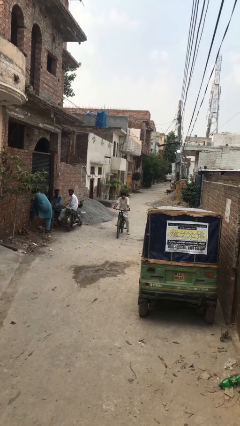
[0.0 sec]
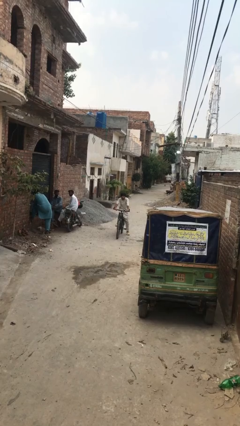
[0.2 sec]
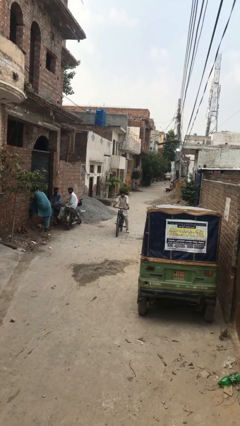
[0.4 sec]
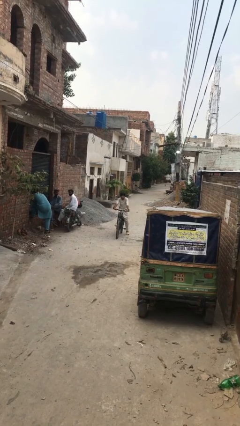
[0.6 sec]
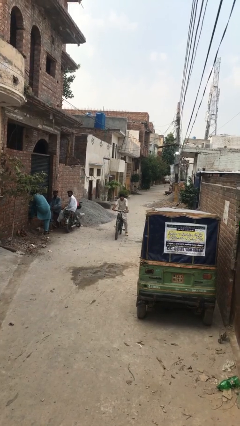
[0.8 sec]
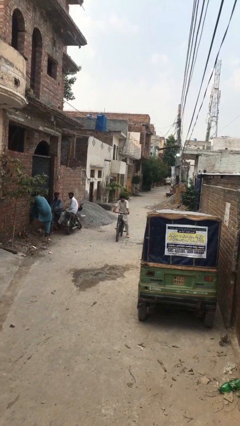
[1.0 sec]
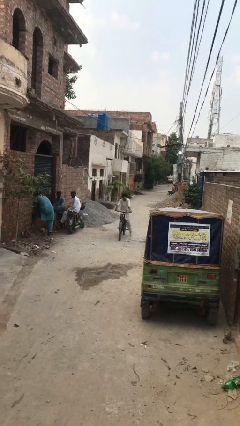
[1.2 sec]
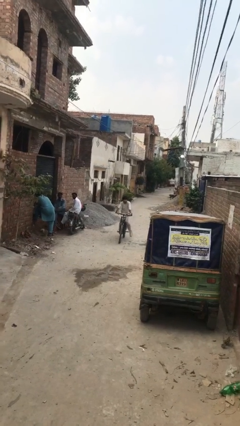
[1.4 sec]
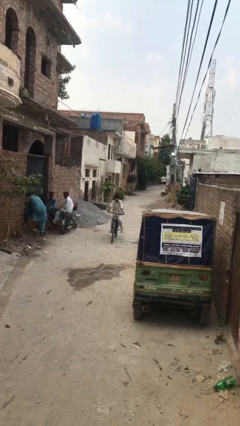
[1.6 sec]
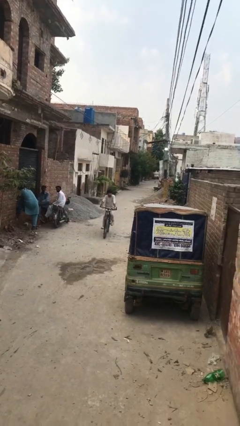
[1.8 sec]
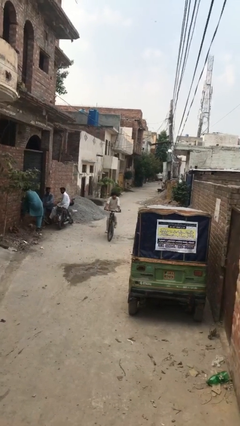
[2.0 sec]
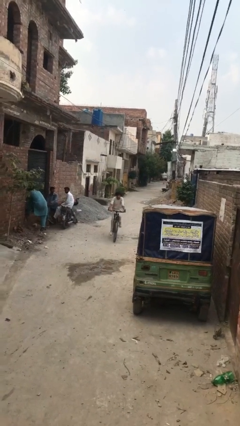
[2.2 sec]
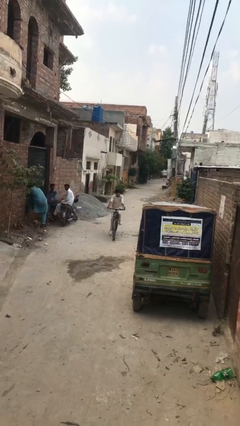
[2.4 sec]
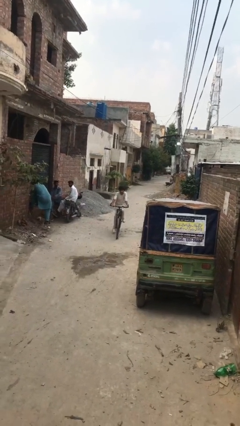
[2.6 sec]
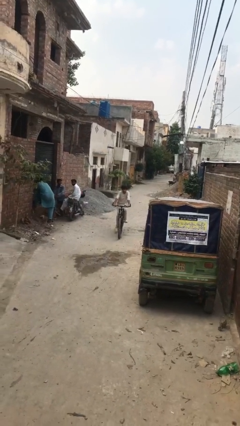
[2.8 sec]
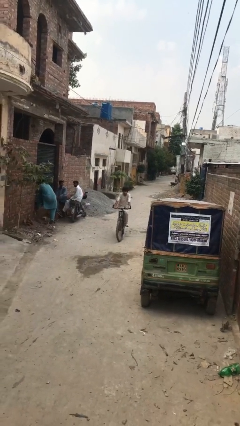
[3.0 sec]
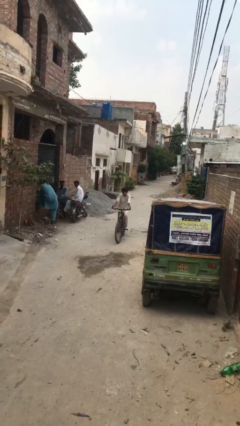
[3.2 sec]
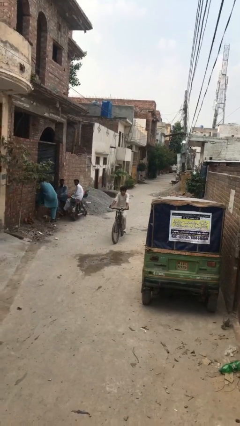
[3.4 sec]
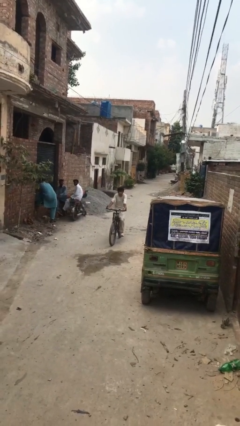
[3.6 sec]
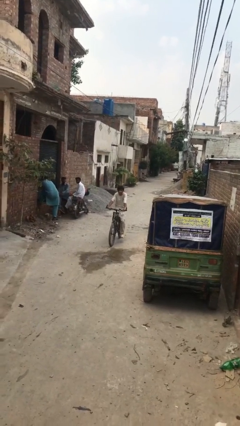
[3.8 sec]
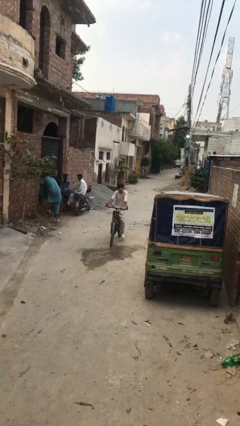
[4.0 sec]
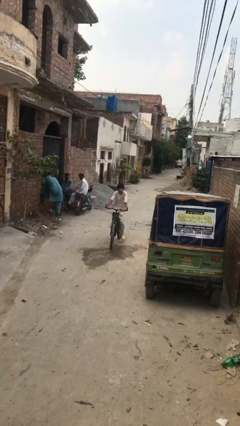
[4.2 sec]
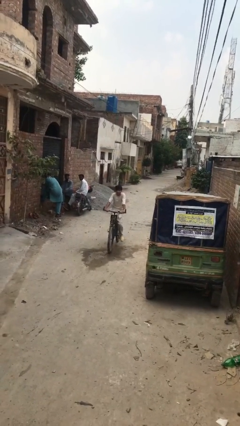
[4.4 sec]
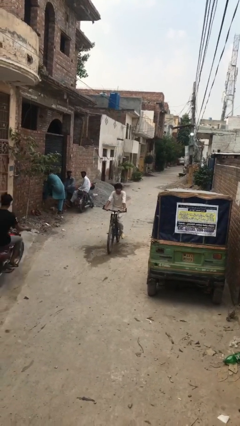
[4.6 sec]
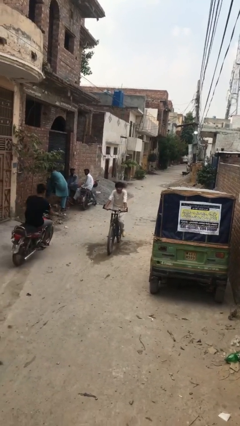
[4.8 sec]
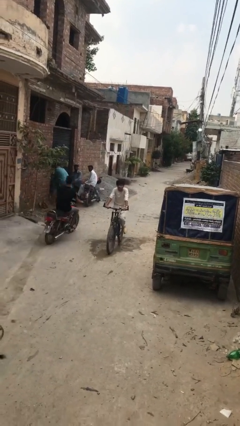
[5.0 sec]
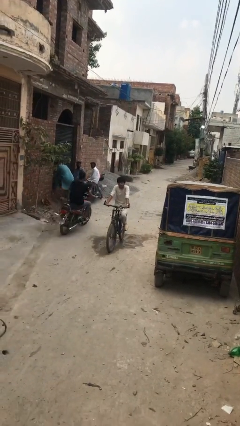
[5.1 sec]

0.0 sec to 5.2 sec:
person rides bicycle

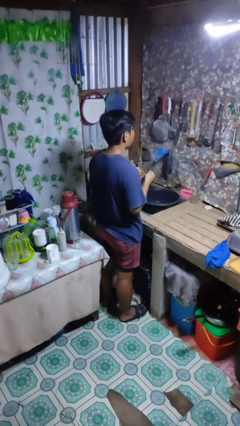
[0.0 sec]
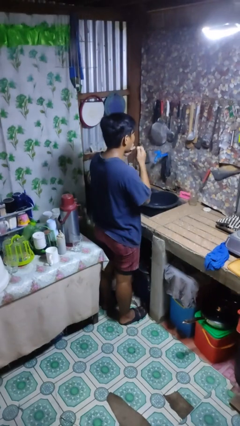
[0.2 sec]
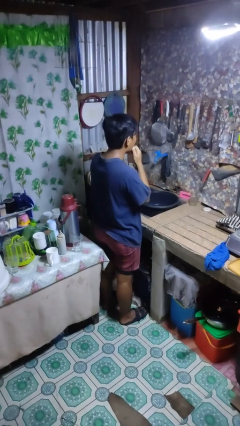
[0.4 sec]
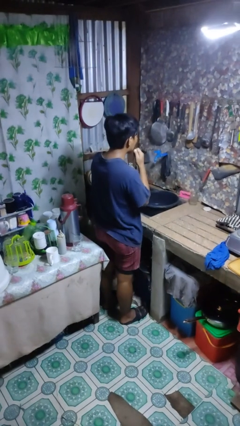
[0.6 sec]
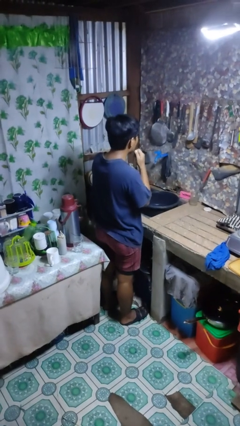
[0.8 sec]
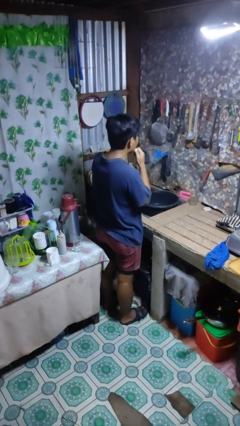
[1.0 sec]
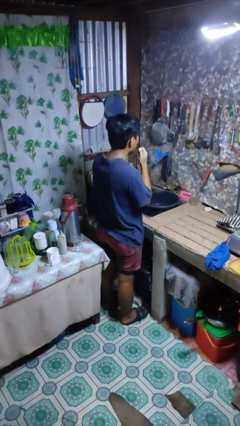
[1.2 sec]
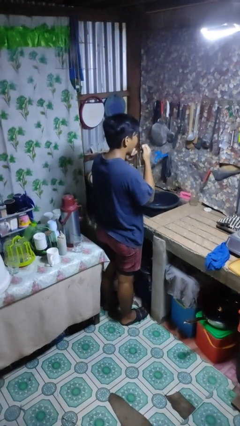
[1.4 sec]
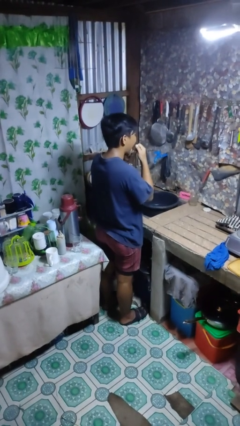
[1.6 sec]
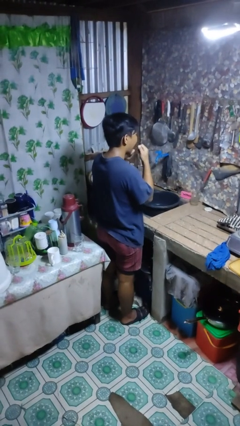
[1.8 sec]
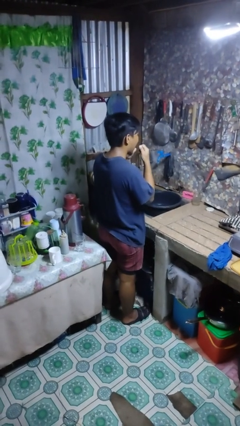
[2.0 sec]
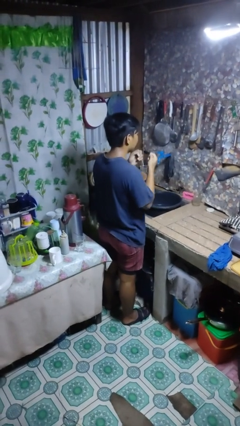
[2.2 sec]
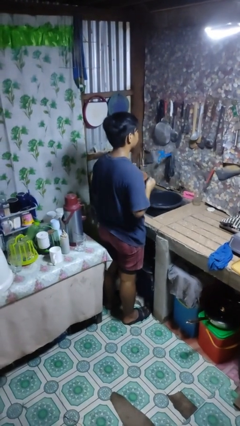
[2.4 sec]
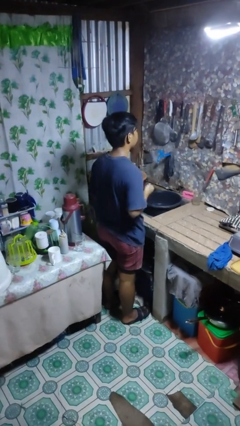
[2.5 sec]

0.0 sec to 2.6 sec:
person flosses

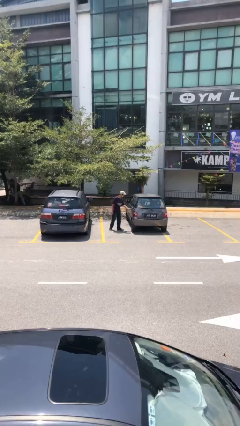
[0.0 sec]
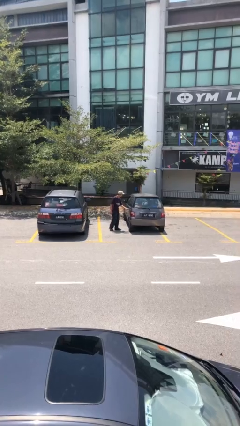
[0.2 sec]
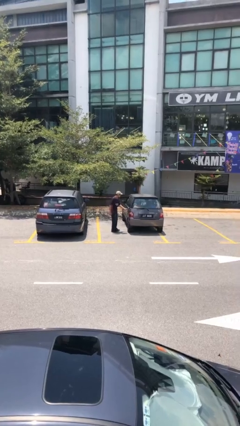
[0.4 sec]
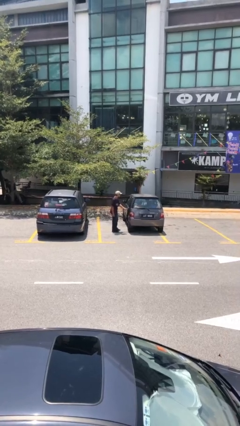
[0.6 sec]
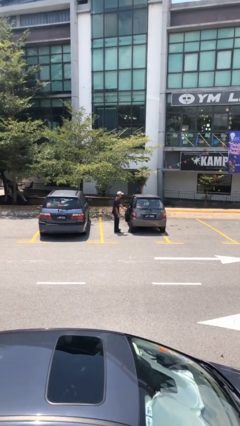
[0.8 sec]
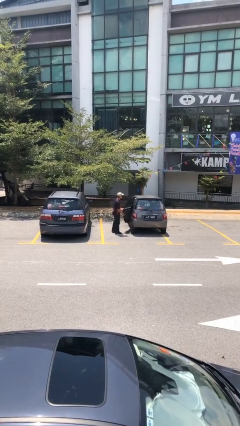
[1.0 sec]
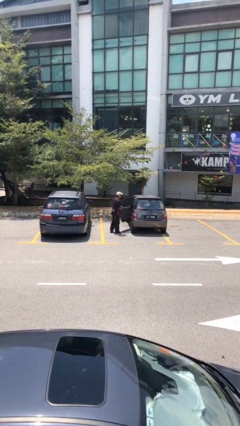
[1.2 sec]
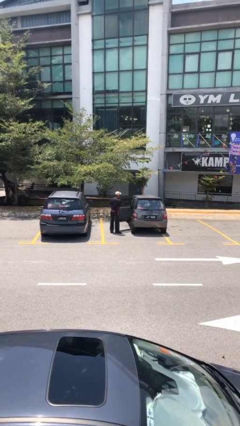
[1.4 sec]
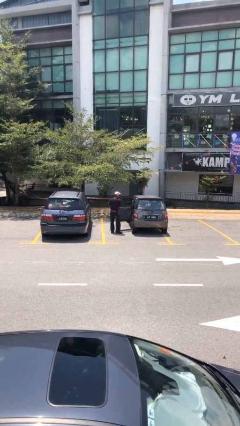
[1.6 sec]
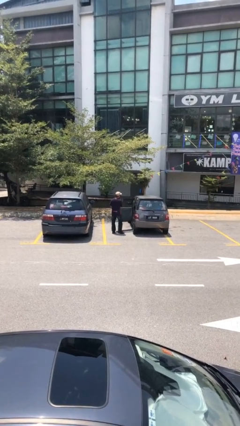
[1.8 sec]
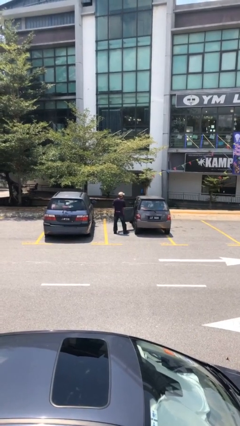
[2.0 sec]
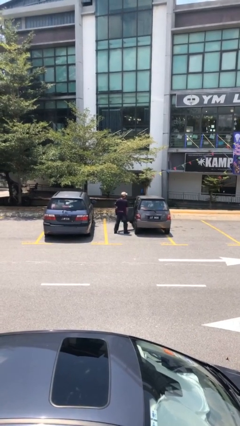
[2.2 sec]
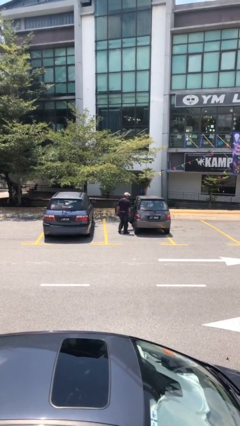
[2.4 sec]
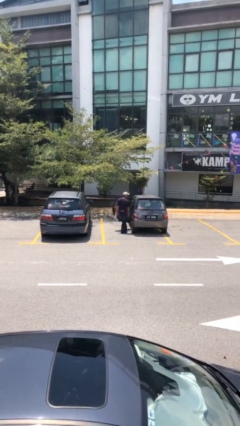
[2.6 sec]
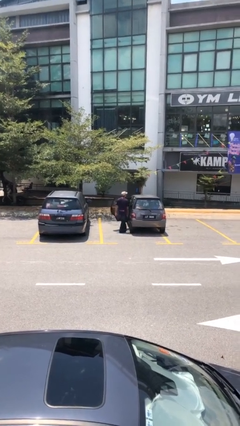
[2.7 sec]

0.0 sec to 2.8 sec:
person opens car door

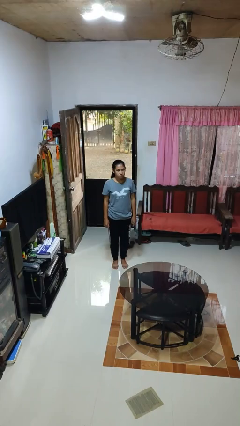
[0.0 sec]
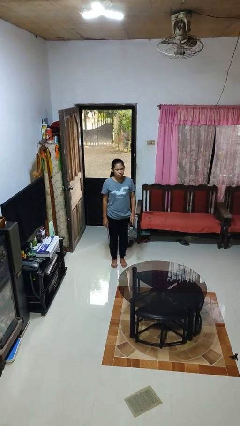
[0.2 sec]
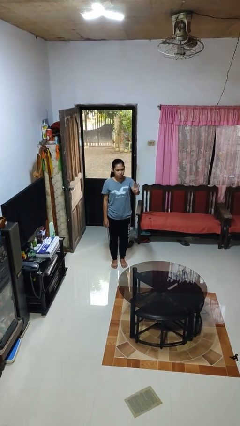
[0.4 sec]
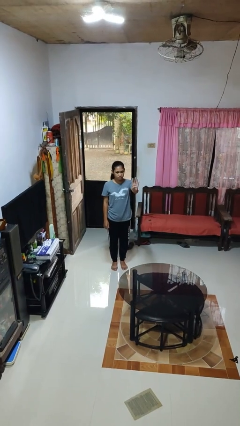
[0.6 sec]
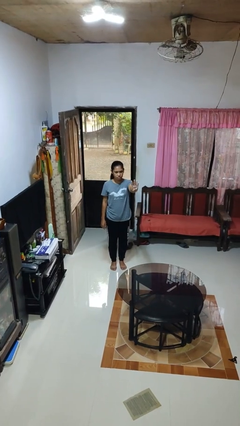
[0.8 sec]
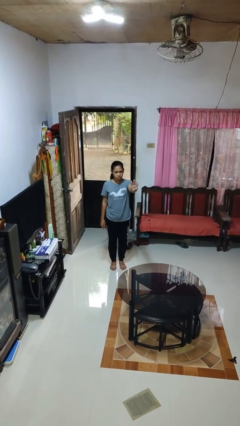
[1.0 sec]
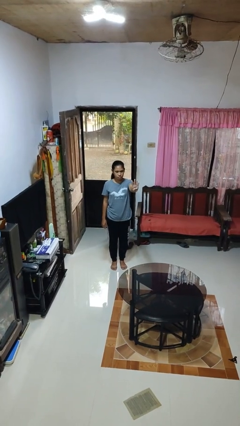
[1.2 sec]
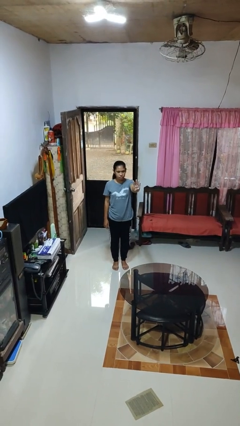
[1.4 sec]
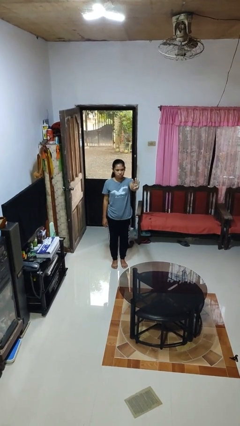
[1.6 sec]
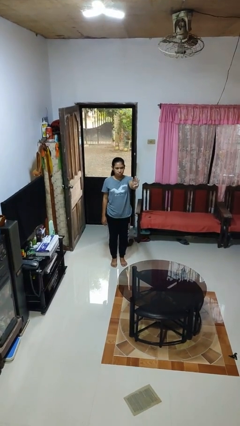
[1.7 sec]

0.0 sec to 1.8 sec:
person gestures number four

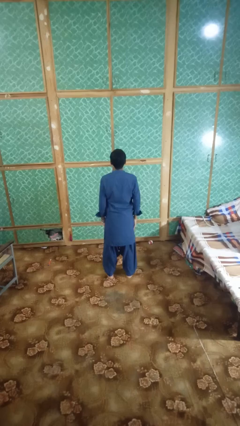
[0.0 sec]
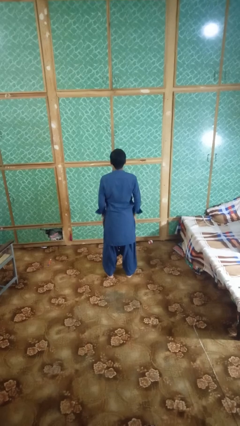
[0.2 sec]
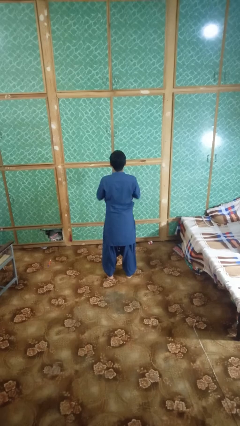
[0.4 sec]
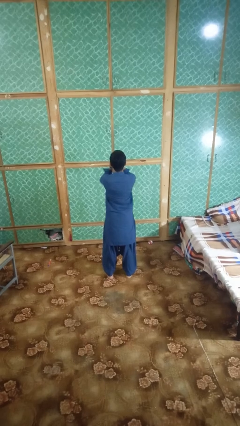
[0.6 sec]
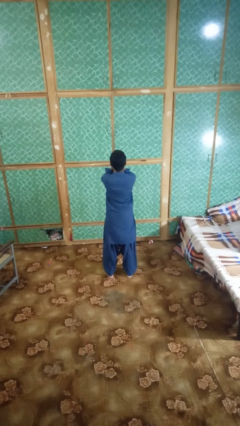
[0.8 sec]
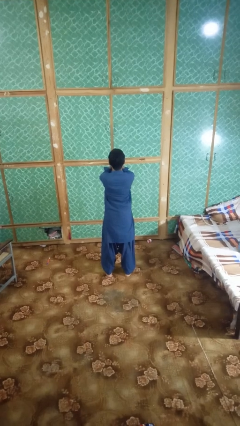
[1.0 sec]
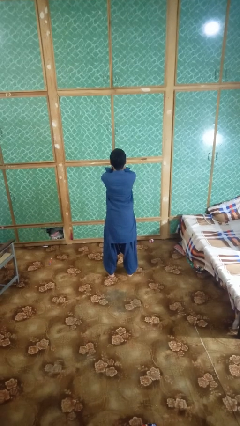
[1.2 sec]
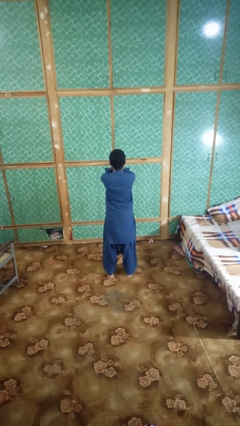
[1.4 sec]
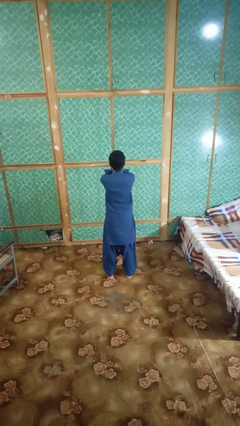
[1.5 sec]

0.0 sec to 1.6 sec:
person covers face with hands

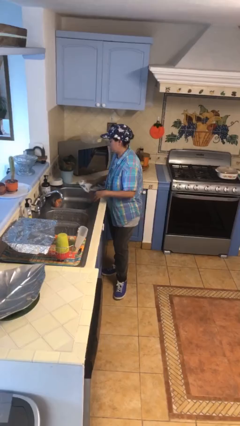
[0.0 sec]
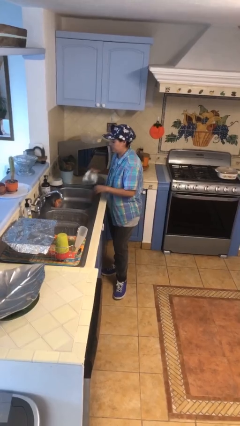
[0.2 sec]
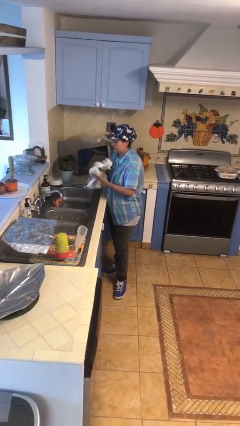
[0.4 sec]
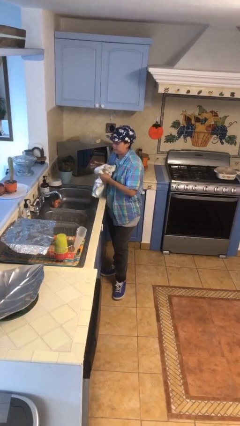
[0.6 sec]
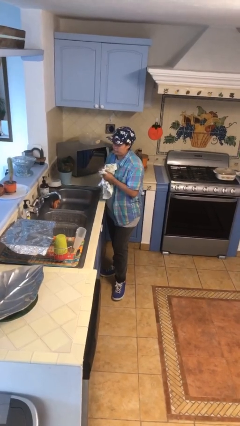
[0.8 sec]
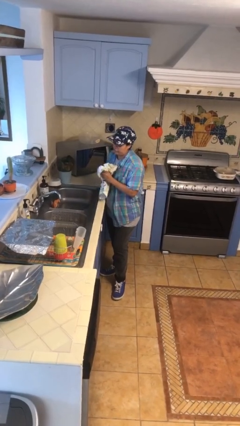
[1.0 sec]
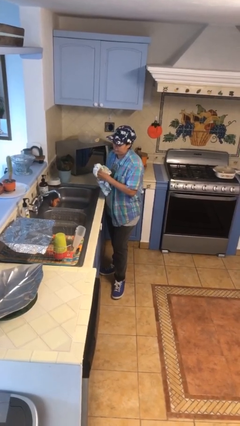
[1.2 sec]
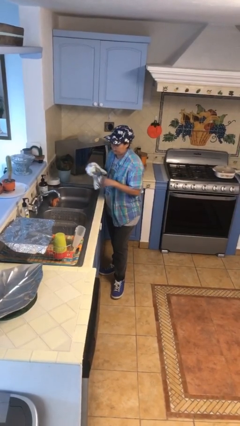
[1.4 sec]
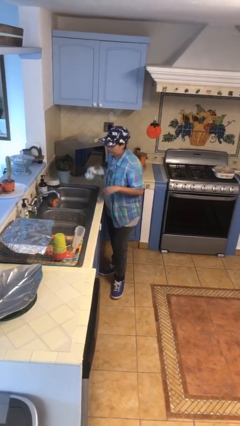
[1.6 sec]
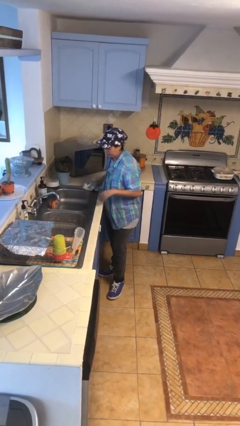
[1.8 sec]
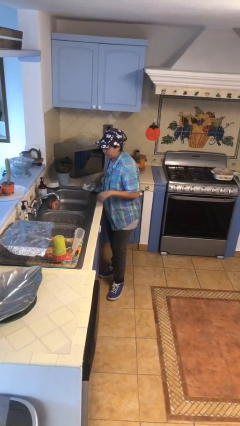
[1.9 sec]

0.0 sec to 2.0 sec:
person dries hands with towel

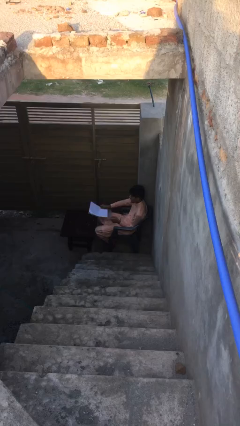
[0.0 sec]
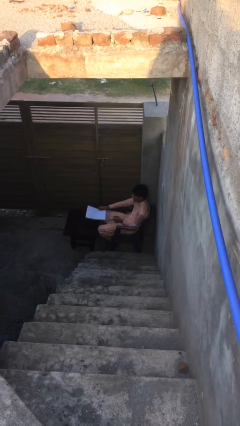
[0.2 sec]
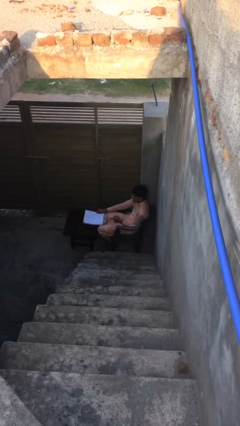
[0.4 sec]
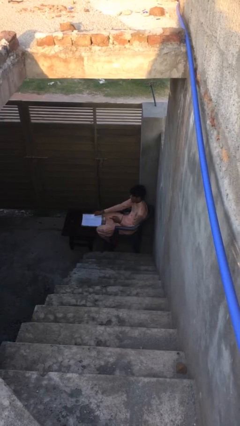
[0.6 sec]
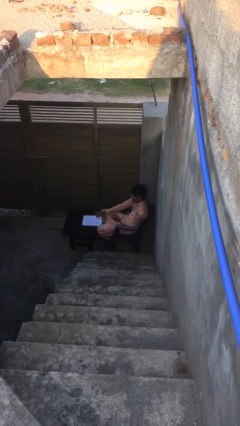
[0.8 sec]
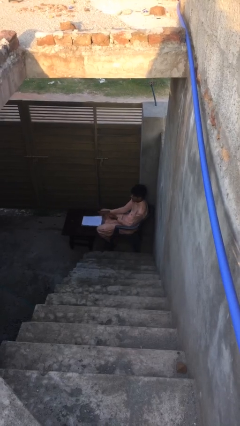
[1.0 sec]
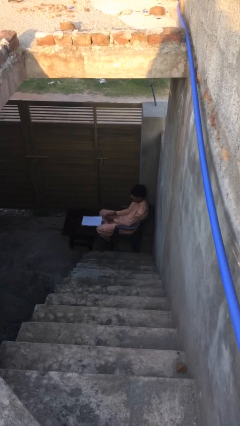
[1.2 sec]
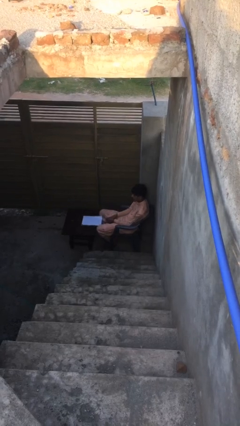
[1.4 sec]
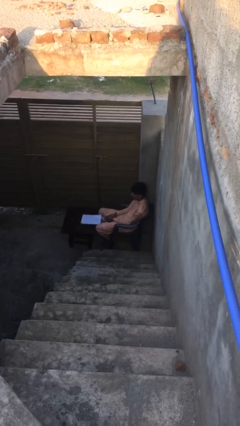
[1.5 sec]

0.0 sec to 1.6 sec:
person puts down object on table
